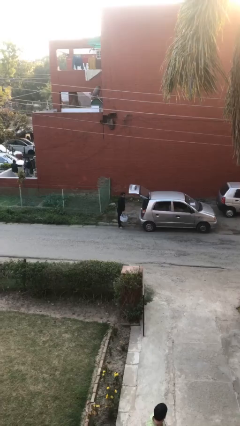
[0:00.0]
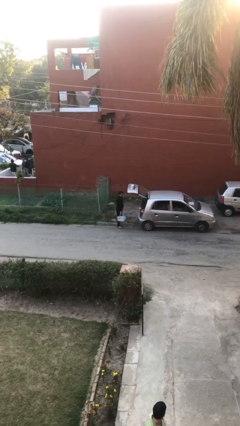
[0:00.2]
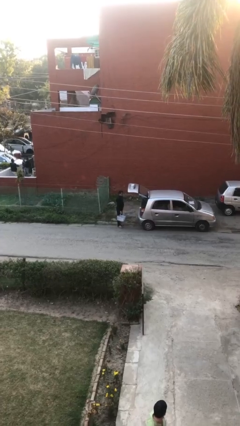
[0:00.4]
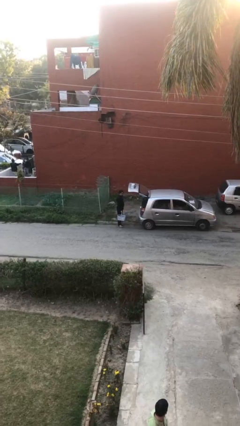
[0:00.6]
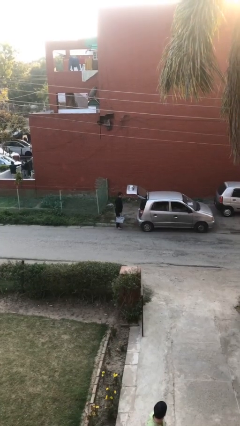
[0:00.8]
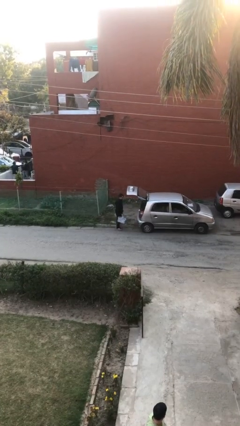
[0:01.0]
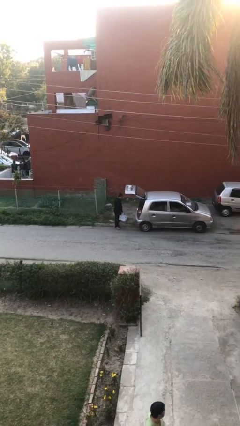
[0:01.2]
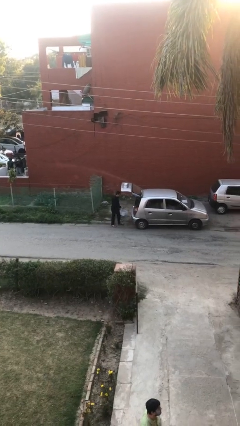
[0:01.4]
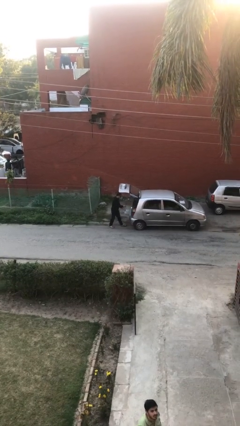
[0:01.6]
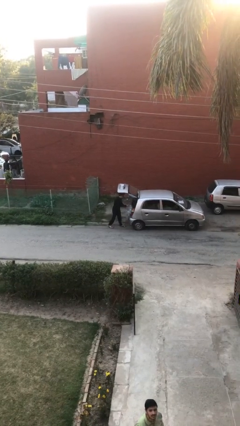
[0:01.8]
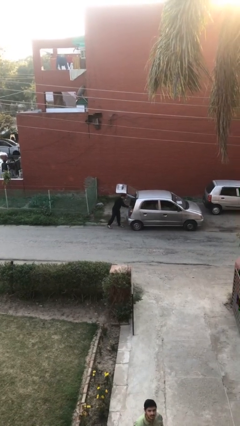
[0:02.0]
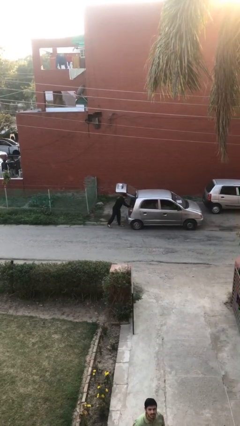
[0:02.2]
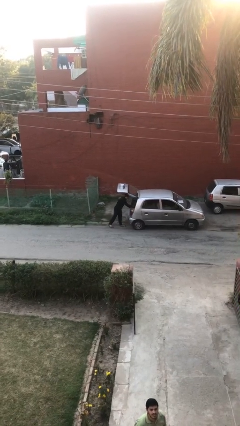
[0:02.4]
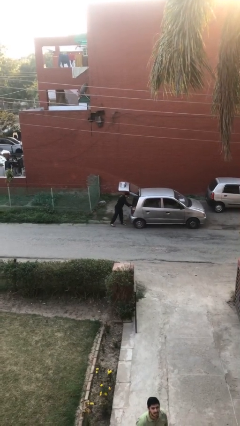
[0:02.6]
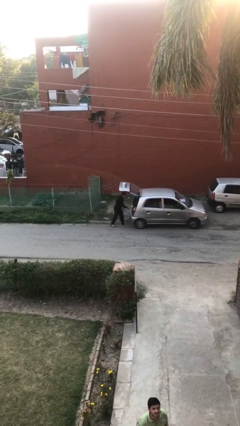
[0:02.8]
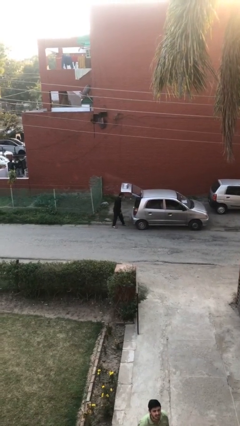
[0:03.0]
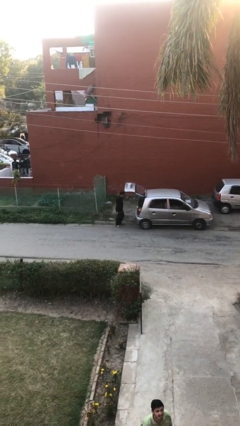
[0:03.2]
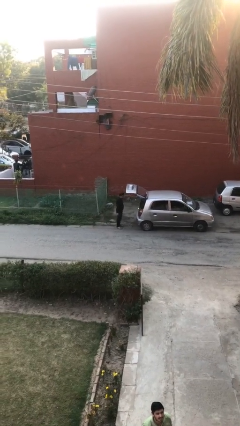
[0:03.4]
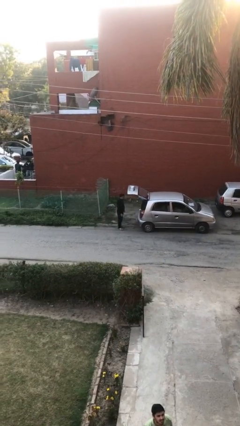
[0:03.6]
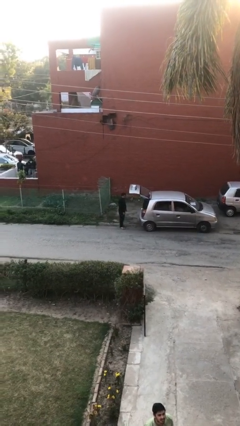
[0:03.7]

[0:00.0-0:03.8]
person loads car

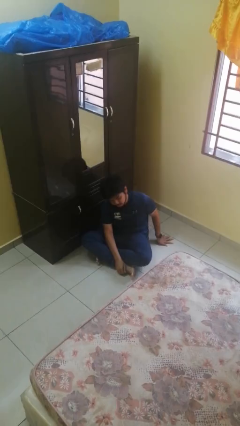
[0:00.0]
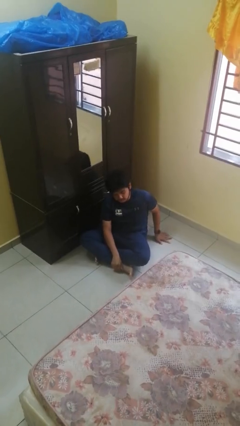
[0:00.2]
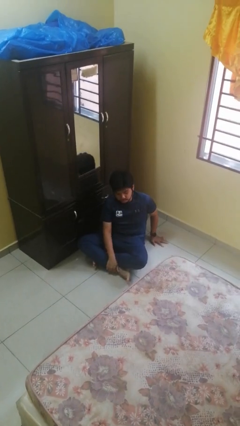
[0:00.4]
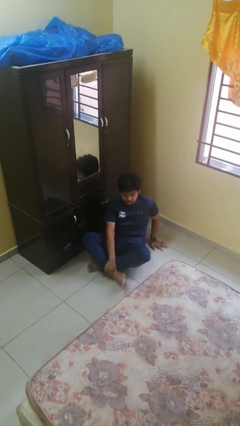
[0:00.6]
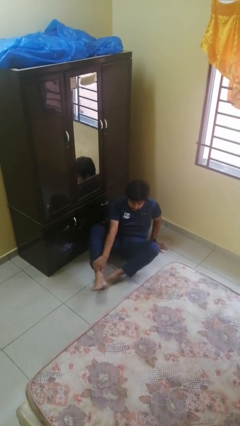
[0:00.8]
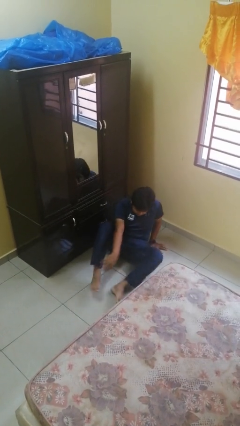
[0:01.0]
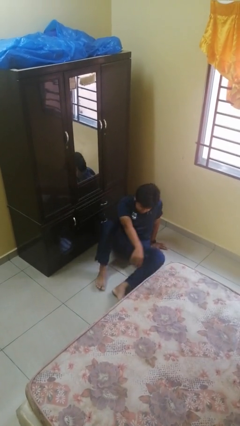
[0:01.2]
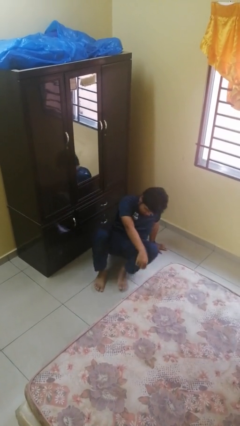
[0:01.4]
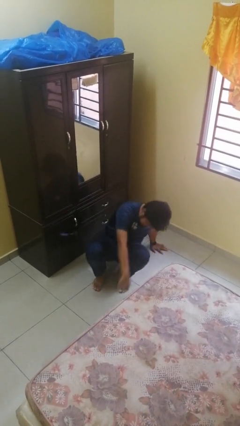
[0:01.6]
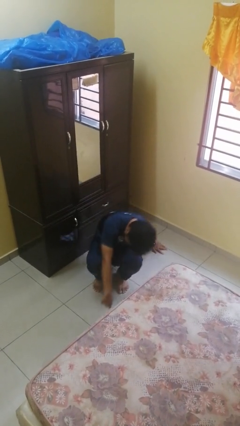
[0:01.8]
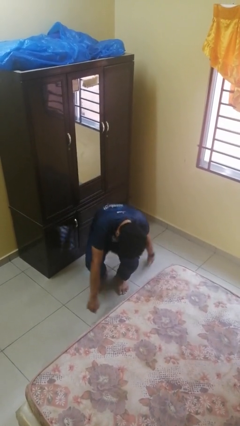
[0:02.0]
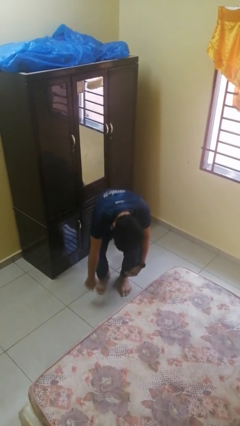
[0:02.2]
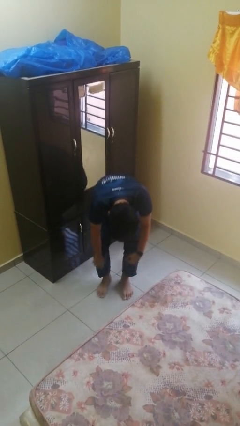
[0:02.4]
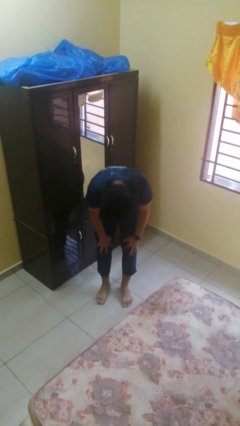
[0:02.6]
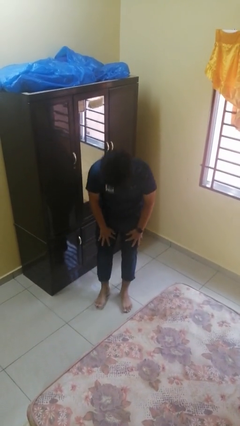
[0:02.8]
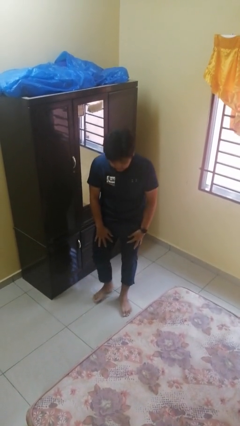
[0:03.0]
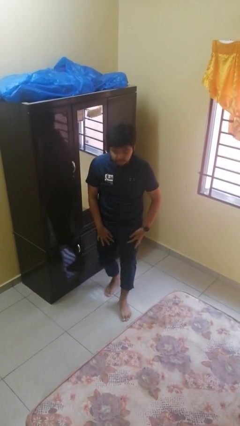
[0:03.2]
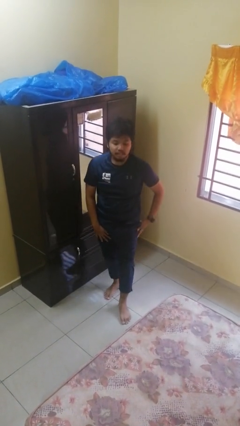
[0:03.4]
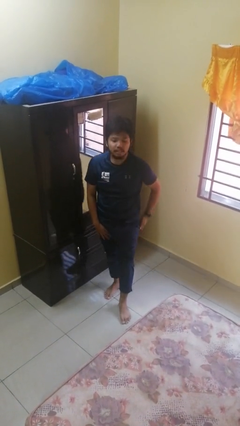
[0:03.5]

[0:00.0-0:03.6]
person stands up from floor

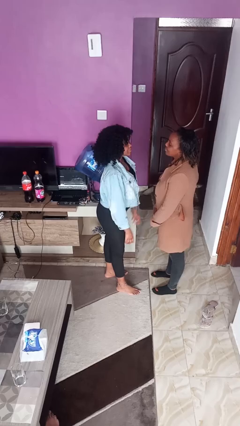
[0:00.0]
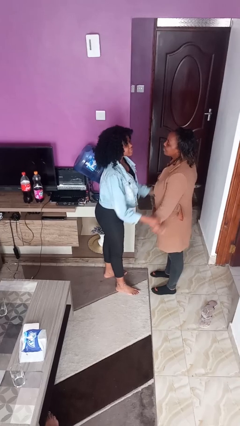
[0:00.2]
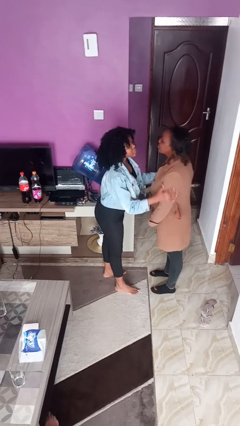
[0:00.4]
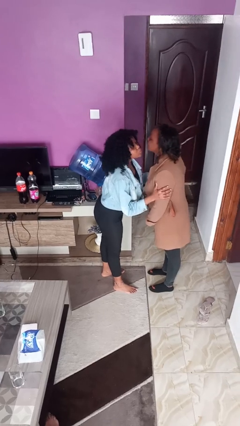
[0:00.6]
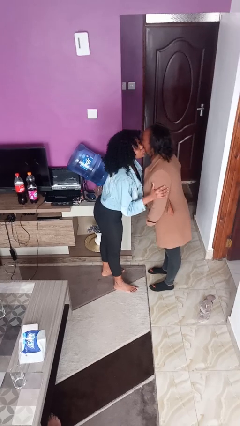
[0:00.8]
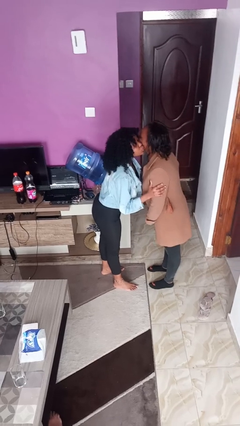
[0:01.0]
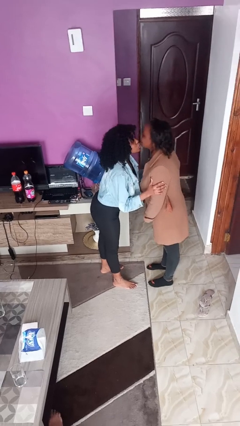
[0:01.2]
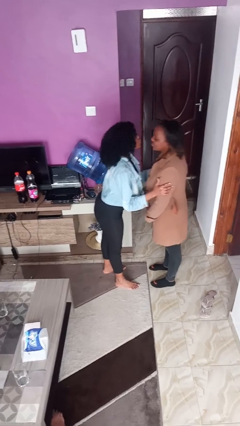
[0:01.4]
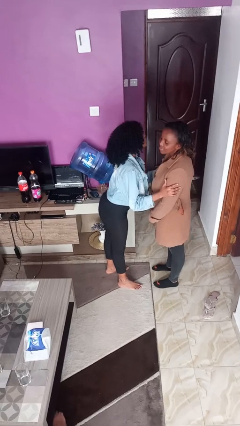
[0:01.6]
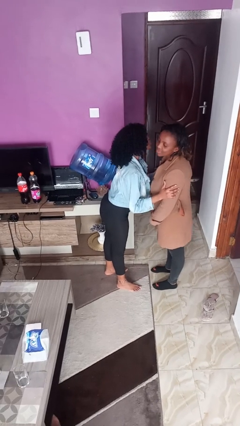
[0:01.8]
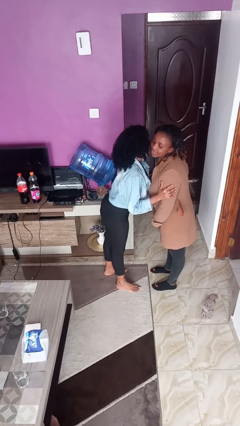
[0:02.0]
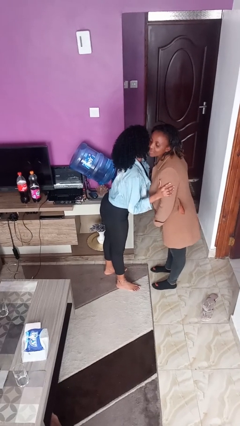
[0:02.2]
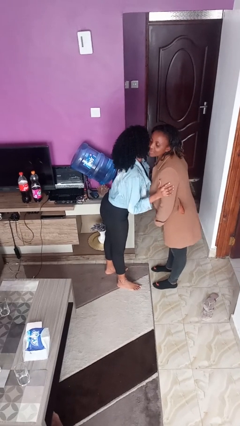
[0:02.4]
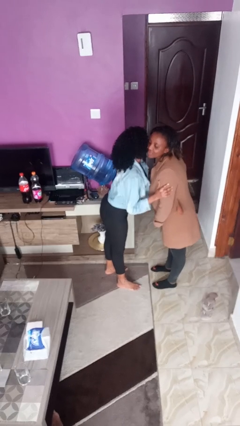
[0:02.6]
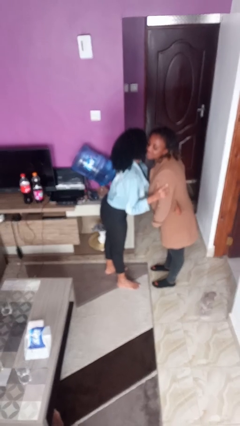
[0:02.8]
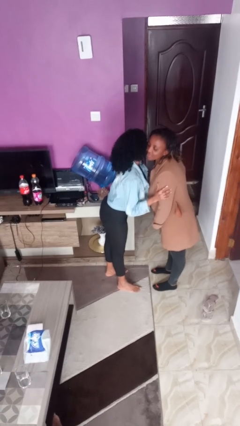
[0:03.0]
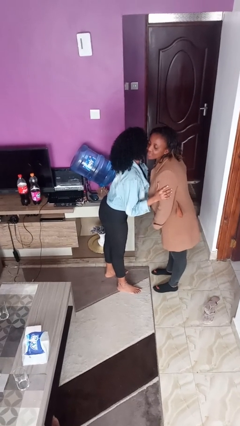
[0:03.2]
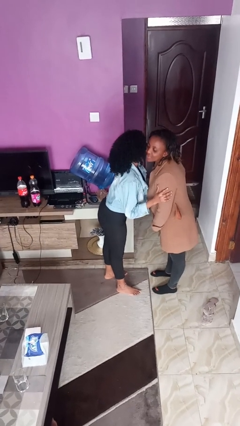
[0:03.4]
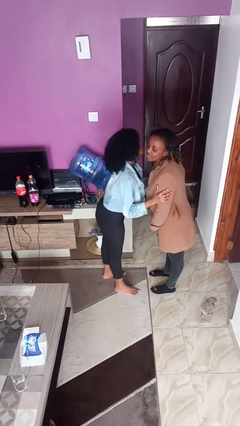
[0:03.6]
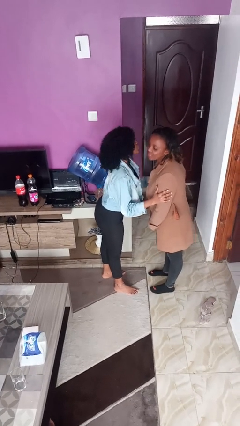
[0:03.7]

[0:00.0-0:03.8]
person kisses cheek of person

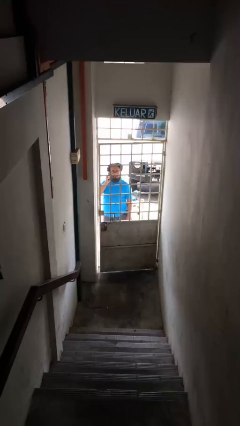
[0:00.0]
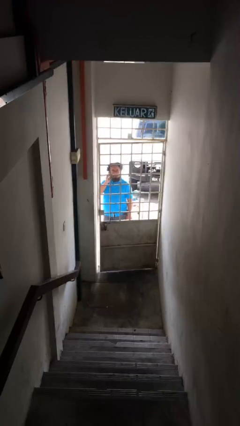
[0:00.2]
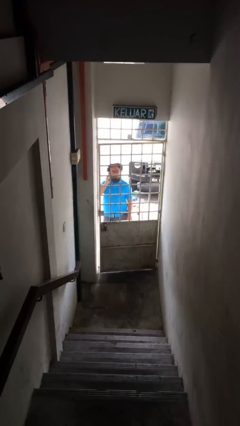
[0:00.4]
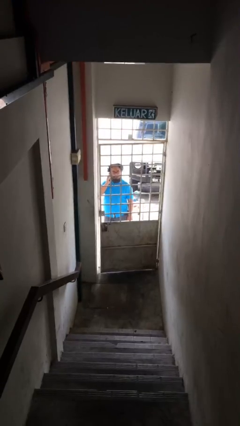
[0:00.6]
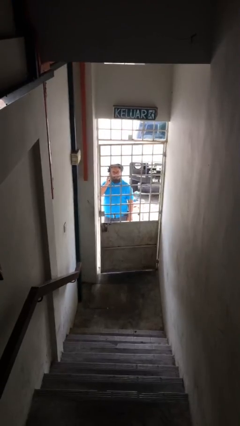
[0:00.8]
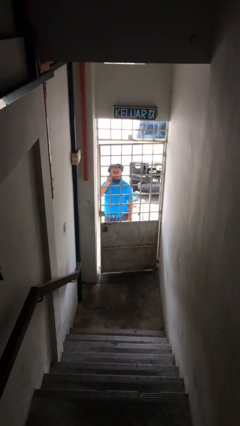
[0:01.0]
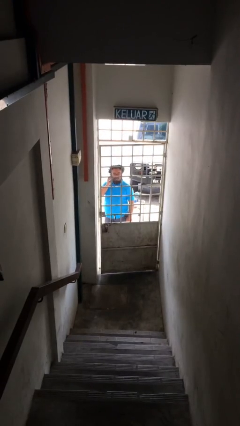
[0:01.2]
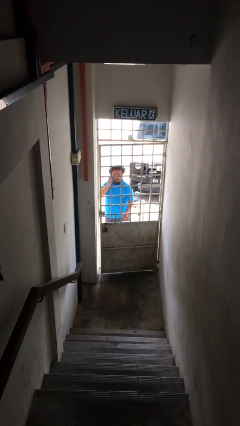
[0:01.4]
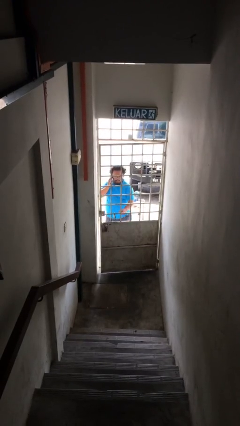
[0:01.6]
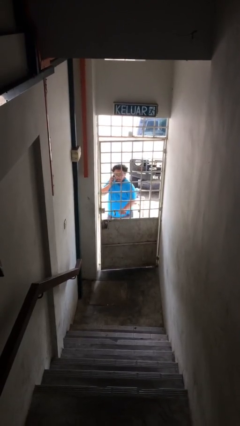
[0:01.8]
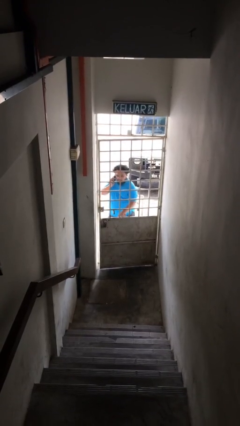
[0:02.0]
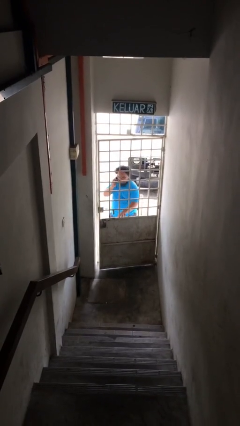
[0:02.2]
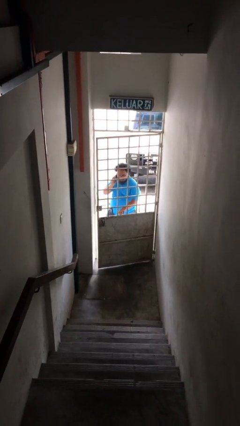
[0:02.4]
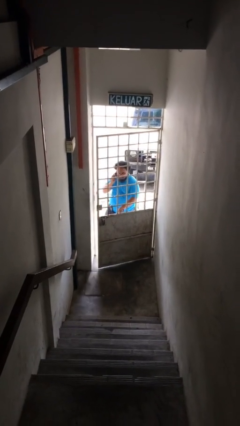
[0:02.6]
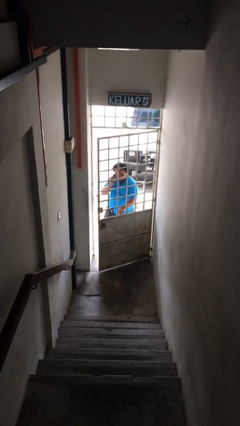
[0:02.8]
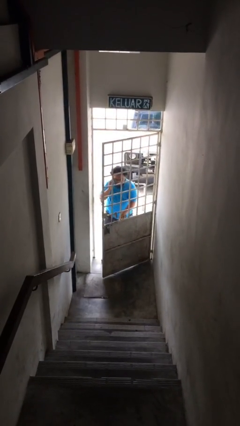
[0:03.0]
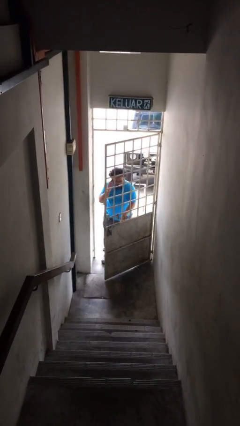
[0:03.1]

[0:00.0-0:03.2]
person opens facility door

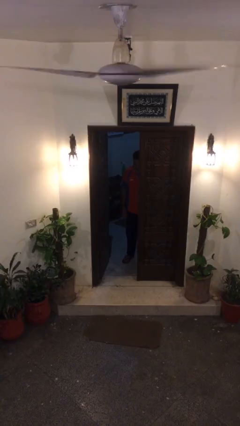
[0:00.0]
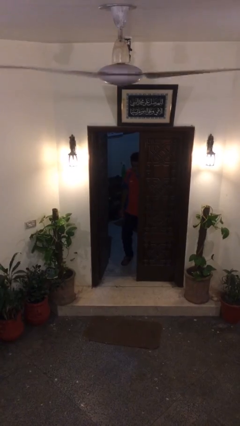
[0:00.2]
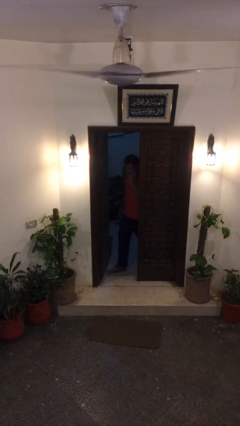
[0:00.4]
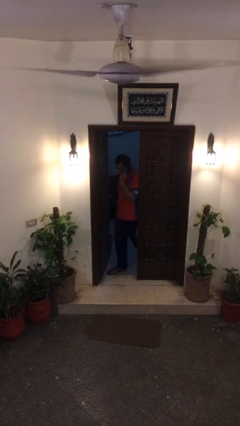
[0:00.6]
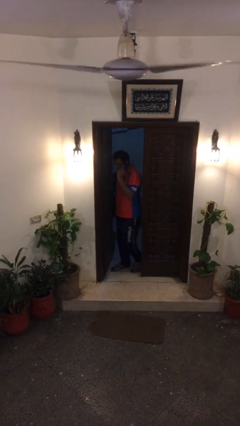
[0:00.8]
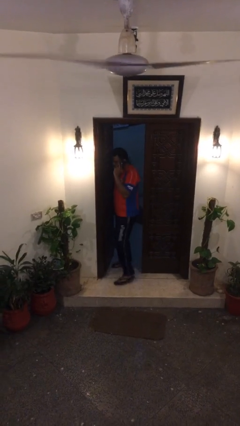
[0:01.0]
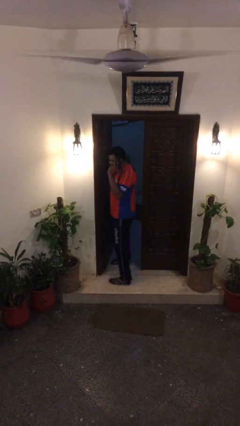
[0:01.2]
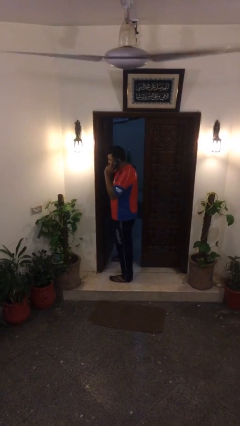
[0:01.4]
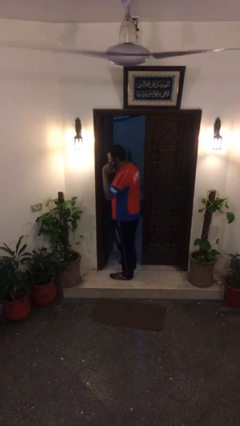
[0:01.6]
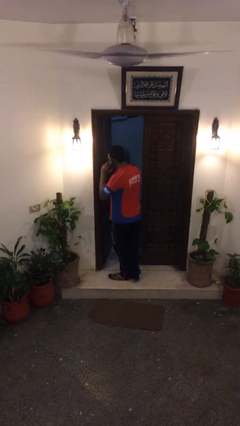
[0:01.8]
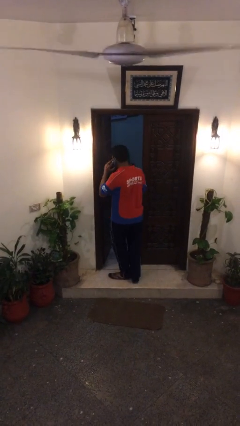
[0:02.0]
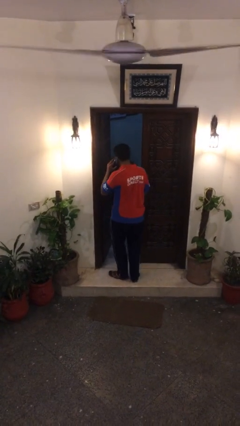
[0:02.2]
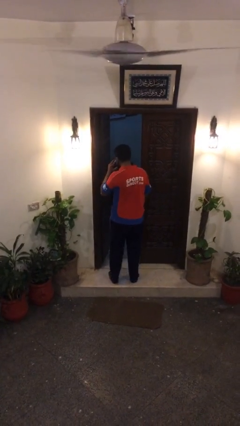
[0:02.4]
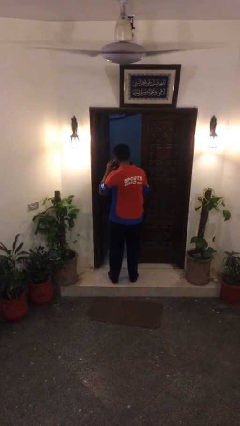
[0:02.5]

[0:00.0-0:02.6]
person enters scene through structure

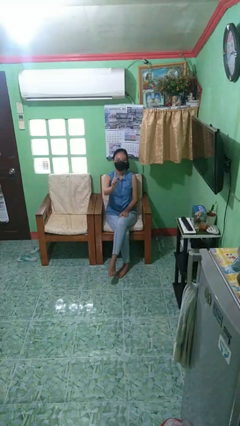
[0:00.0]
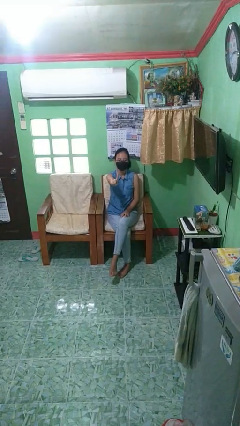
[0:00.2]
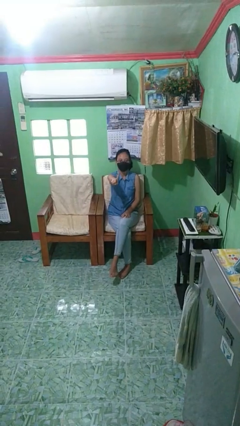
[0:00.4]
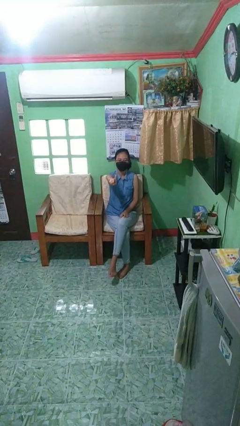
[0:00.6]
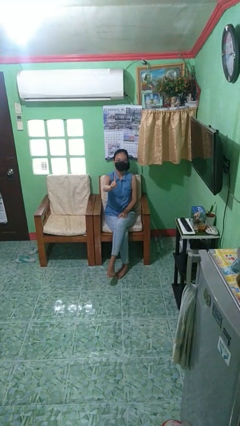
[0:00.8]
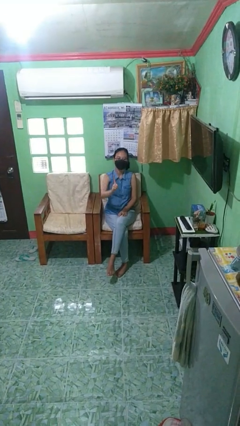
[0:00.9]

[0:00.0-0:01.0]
person gestures number one
